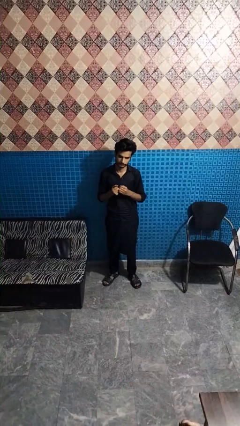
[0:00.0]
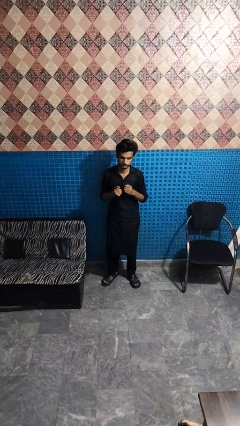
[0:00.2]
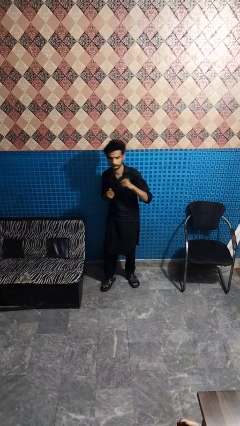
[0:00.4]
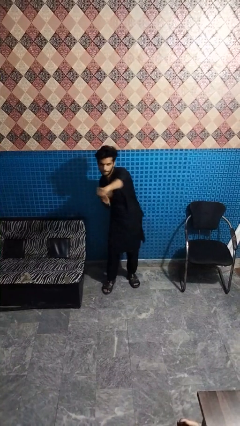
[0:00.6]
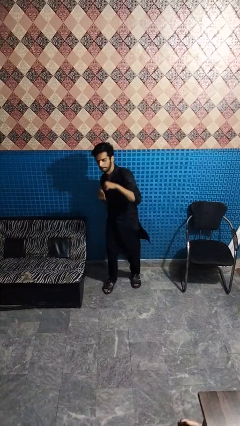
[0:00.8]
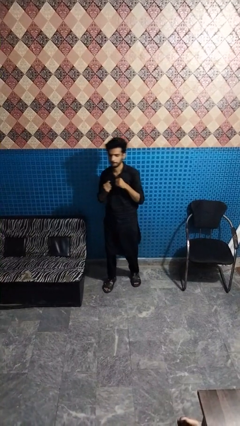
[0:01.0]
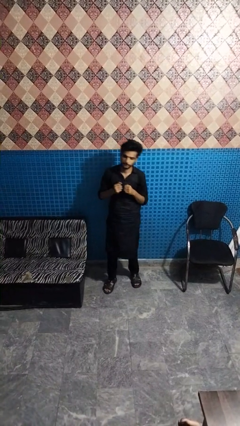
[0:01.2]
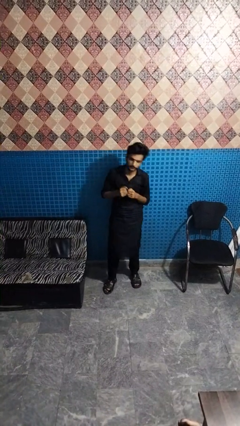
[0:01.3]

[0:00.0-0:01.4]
person punches

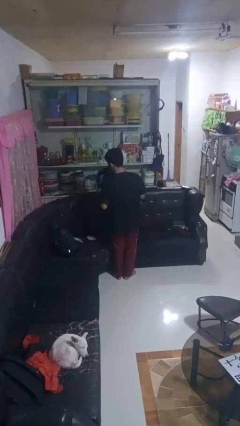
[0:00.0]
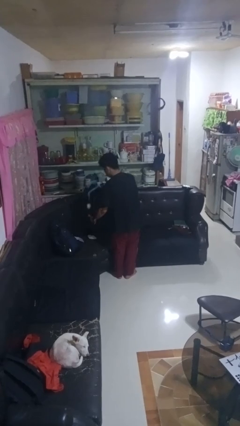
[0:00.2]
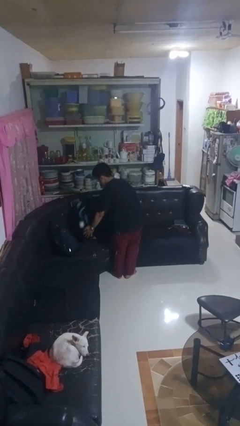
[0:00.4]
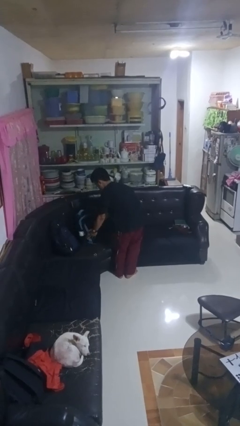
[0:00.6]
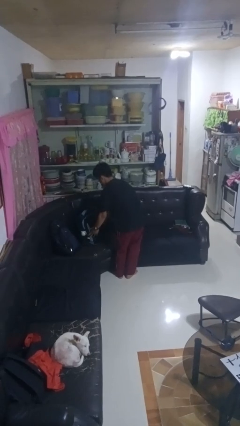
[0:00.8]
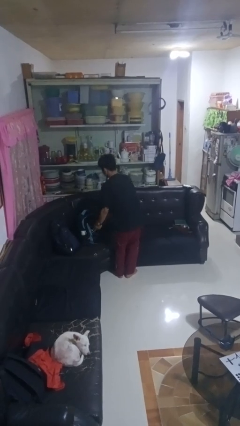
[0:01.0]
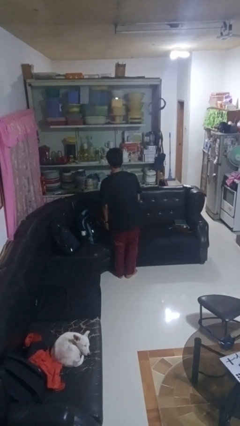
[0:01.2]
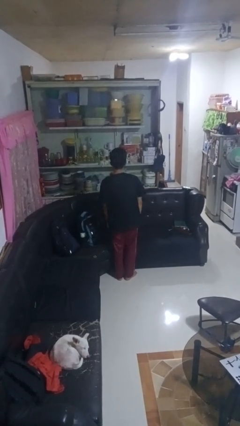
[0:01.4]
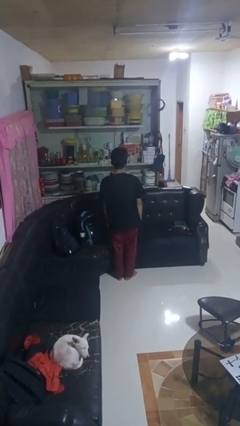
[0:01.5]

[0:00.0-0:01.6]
person puts down object on couch

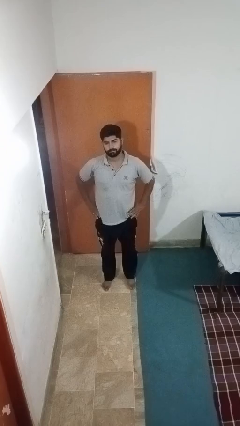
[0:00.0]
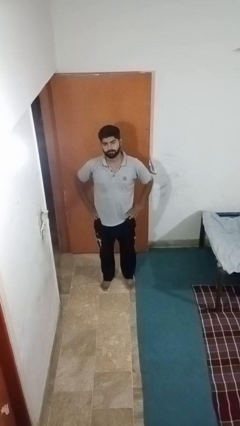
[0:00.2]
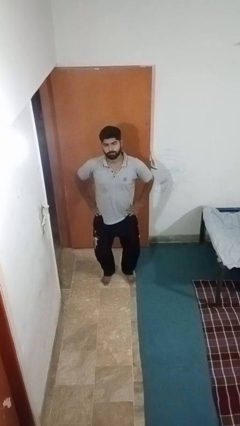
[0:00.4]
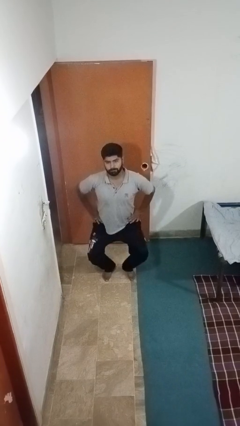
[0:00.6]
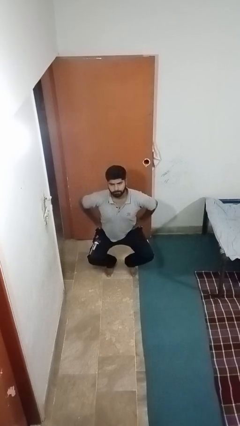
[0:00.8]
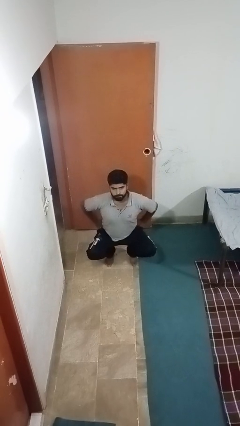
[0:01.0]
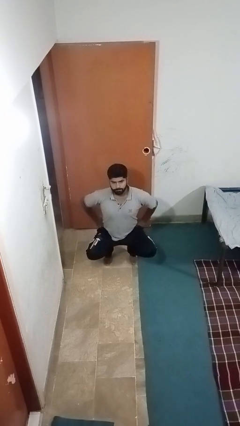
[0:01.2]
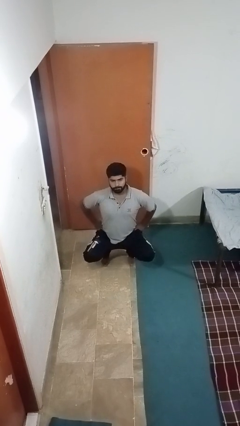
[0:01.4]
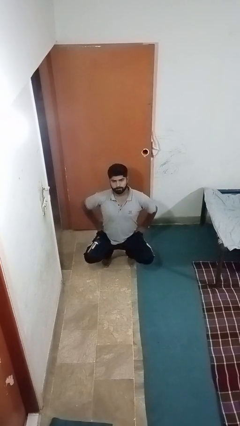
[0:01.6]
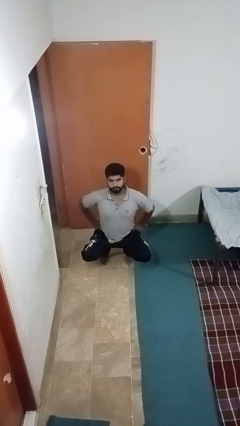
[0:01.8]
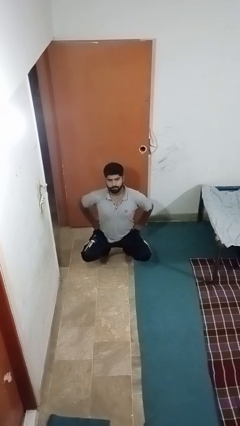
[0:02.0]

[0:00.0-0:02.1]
person squats

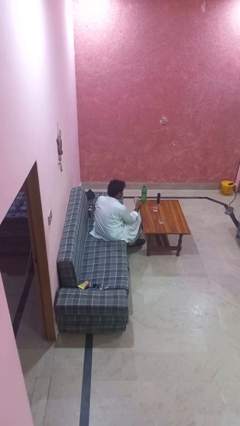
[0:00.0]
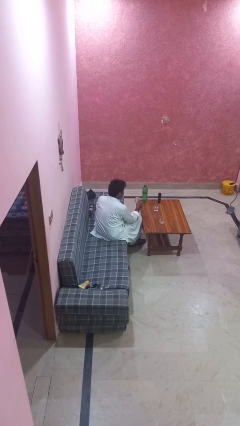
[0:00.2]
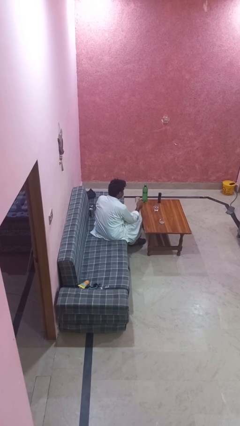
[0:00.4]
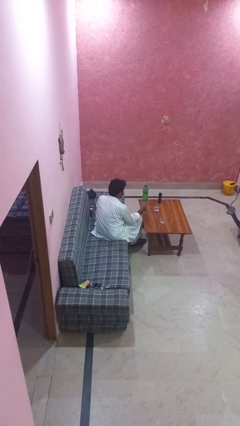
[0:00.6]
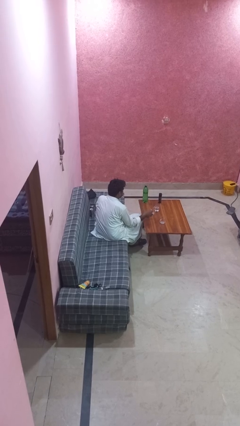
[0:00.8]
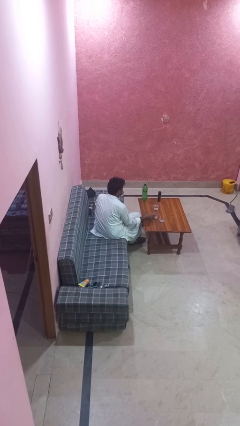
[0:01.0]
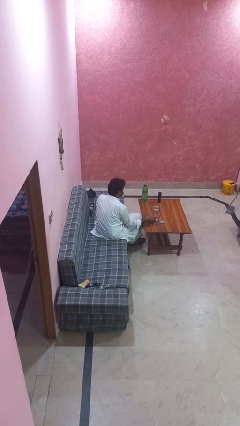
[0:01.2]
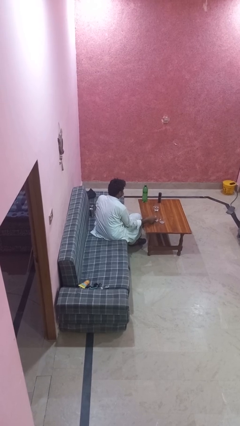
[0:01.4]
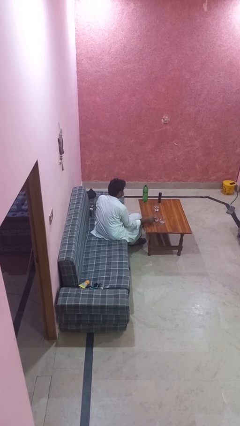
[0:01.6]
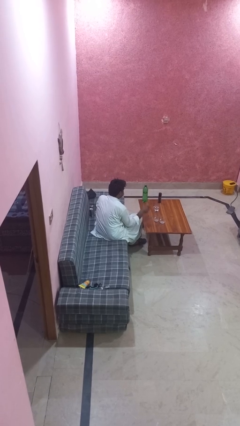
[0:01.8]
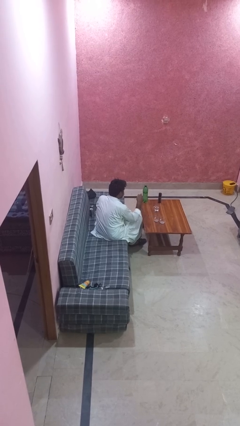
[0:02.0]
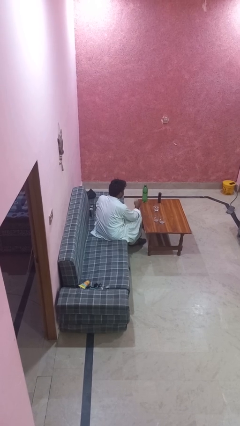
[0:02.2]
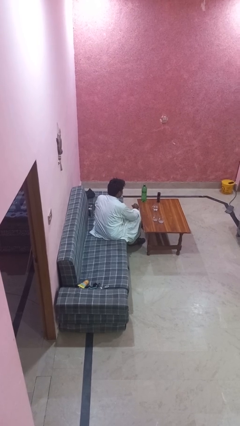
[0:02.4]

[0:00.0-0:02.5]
person puts down object on table

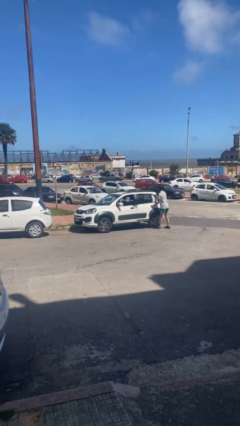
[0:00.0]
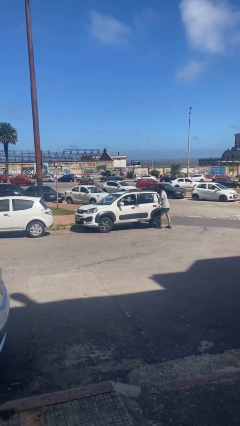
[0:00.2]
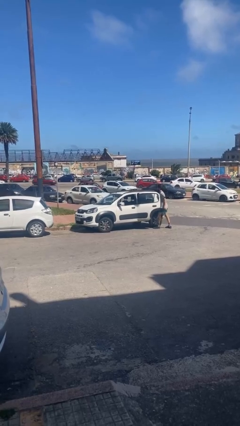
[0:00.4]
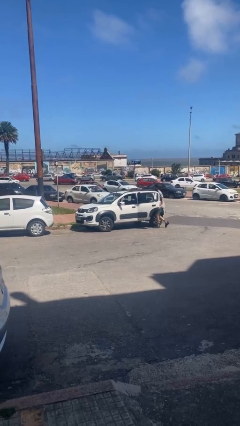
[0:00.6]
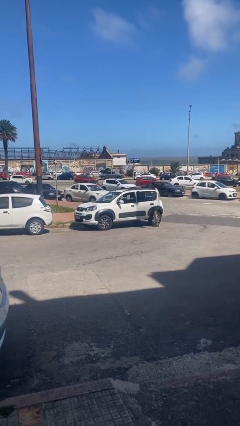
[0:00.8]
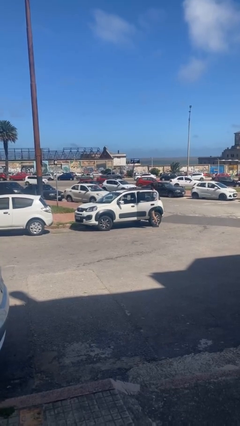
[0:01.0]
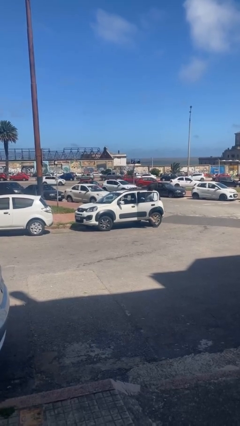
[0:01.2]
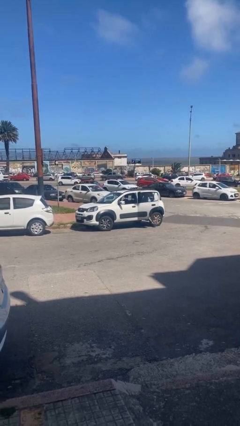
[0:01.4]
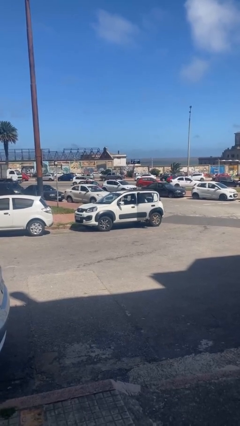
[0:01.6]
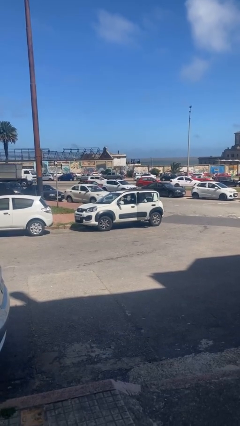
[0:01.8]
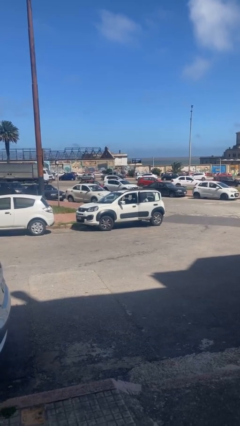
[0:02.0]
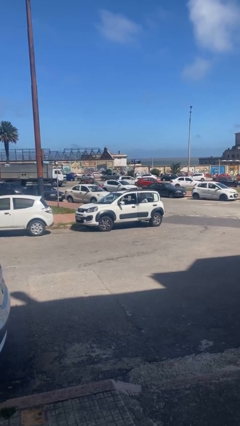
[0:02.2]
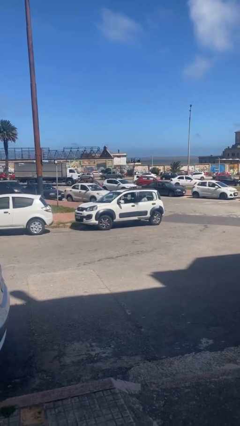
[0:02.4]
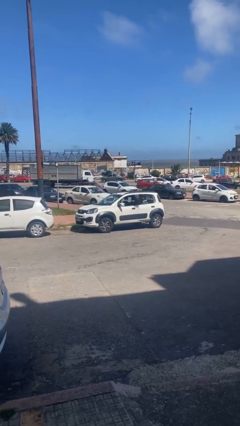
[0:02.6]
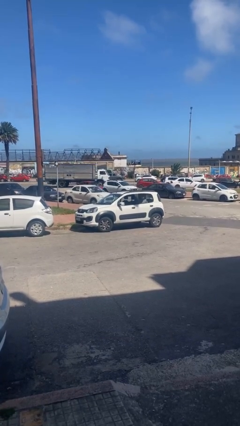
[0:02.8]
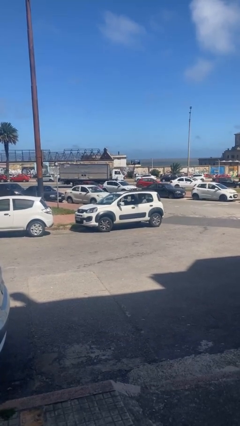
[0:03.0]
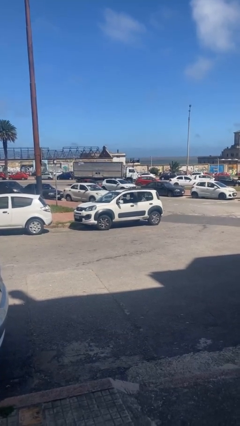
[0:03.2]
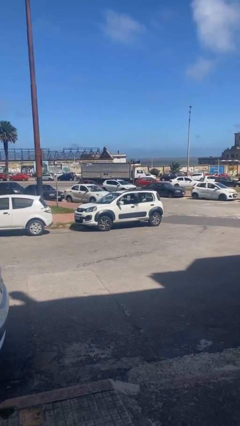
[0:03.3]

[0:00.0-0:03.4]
car picks up person

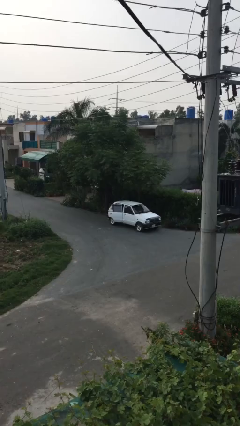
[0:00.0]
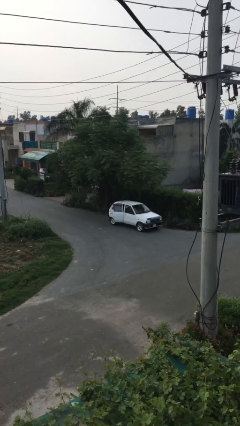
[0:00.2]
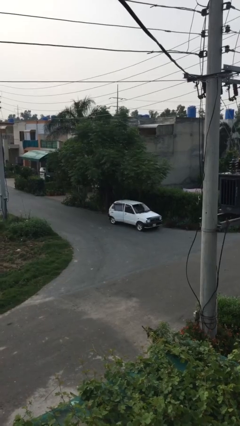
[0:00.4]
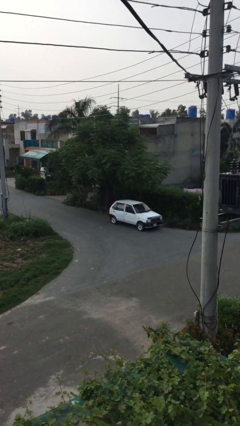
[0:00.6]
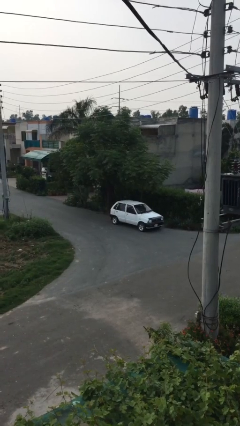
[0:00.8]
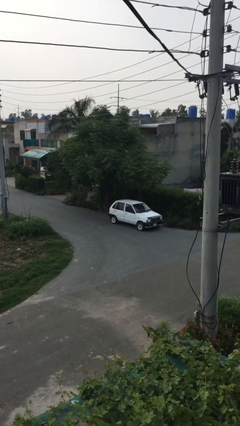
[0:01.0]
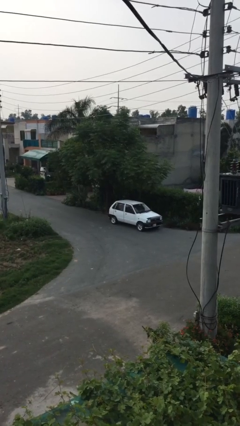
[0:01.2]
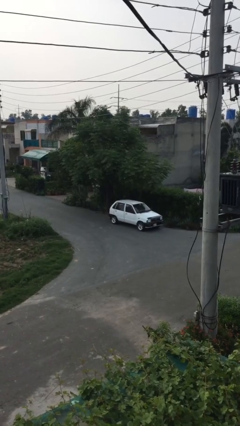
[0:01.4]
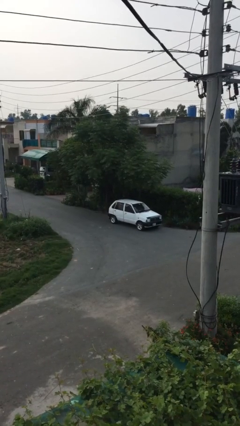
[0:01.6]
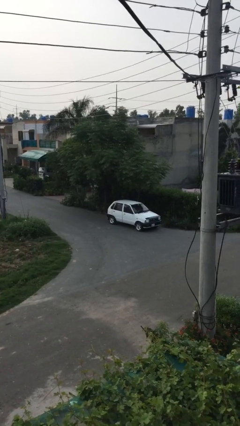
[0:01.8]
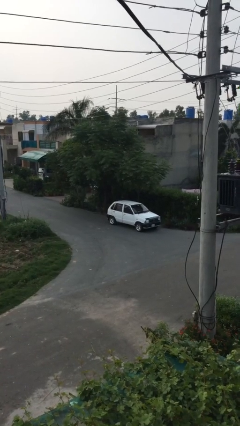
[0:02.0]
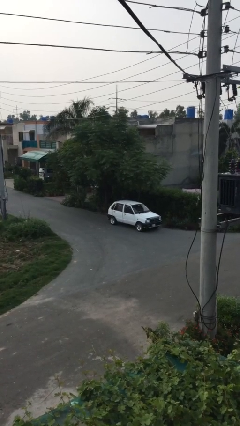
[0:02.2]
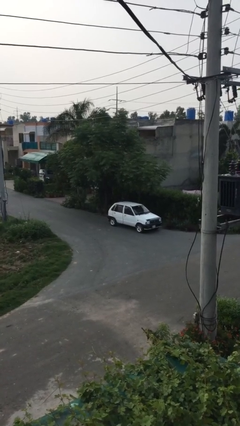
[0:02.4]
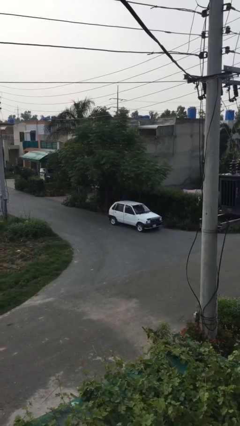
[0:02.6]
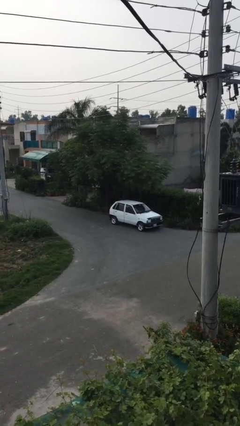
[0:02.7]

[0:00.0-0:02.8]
person closes car door

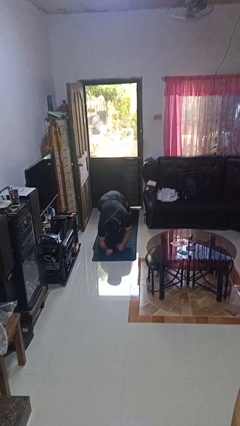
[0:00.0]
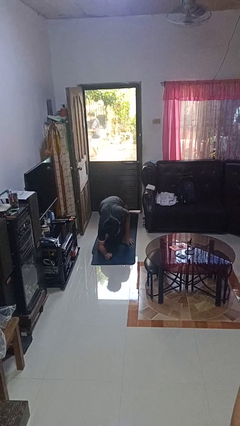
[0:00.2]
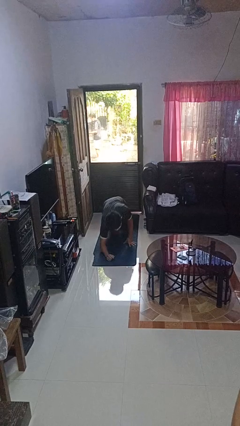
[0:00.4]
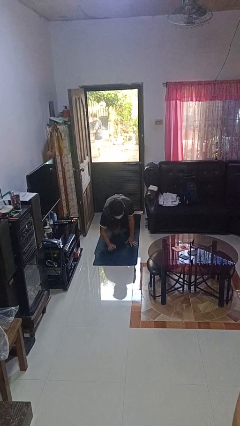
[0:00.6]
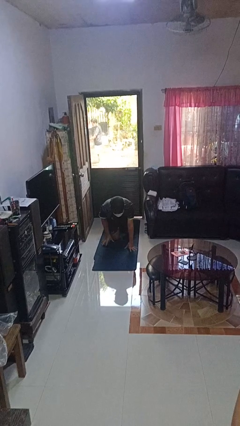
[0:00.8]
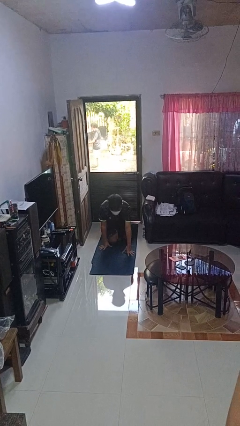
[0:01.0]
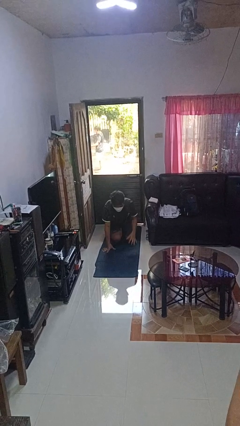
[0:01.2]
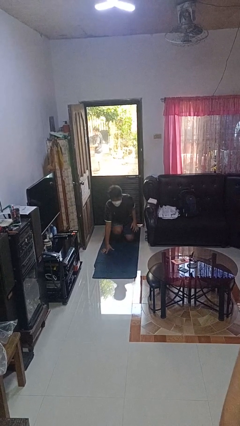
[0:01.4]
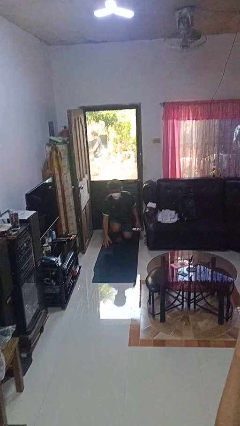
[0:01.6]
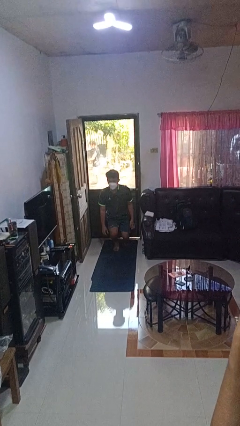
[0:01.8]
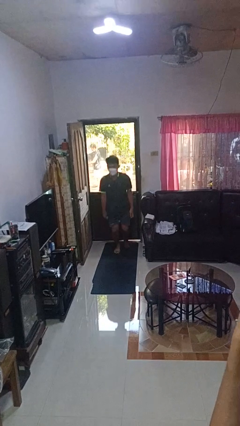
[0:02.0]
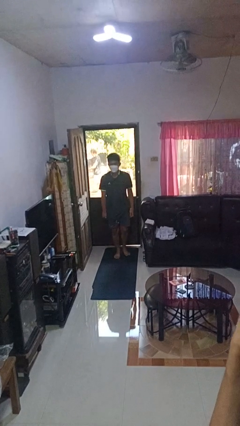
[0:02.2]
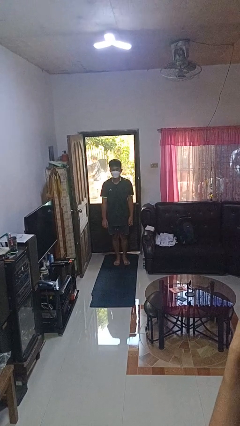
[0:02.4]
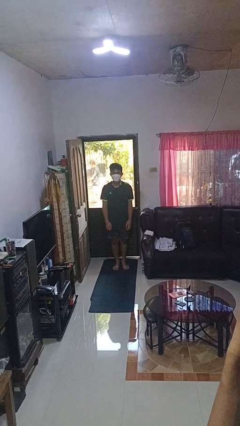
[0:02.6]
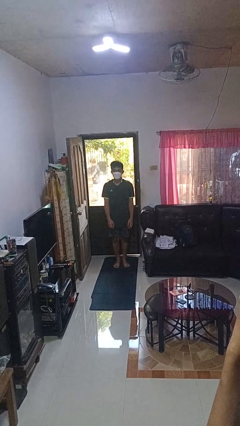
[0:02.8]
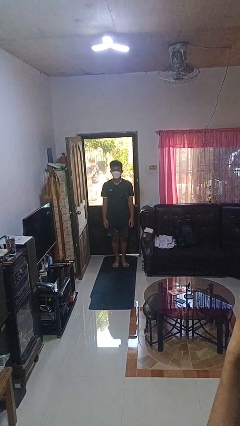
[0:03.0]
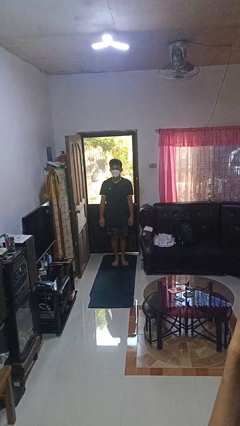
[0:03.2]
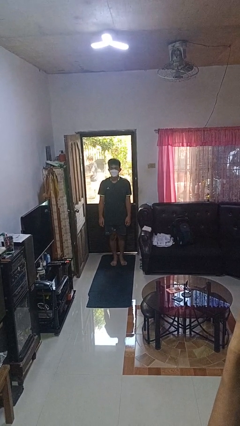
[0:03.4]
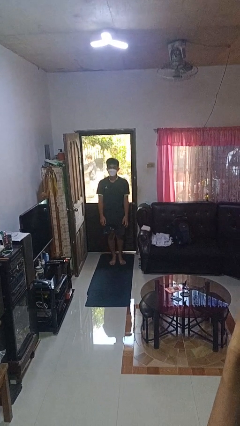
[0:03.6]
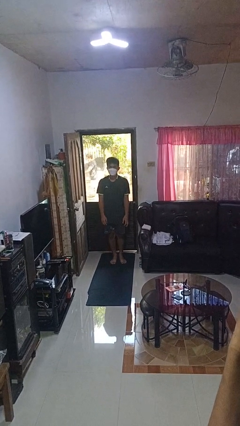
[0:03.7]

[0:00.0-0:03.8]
person stands up from floor
